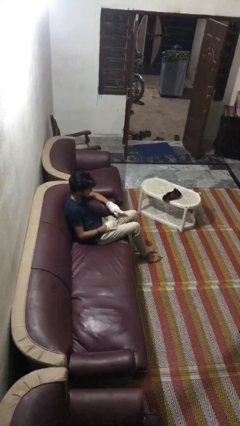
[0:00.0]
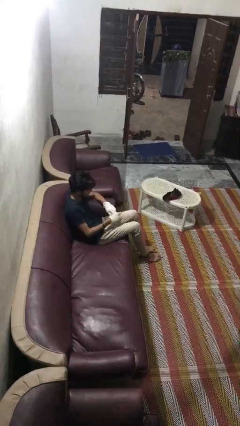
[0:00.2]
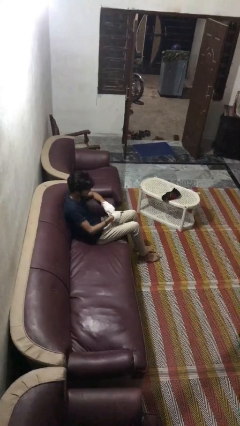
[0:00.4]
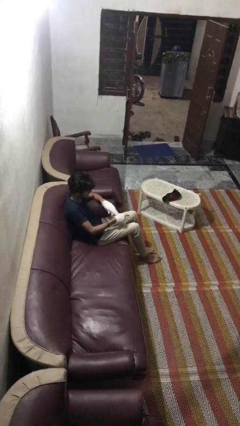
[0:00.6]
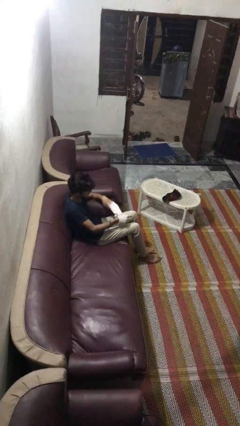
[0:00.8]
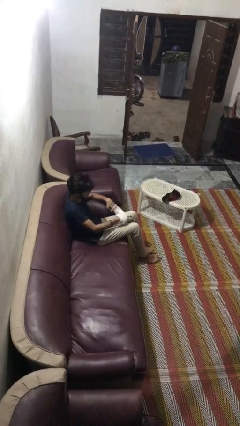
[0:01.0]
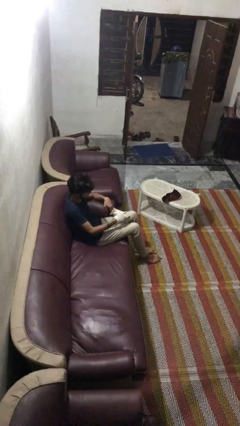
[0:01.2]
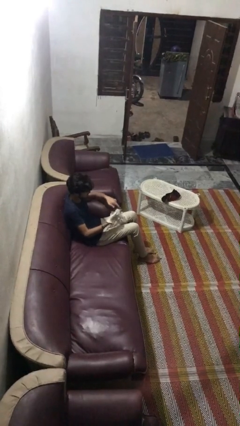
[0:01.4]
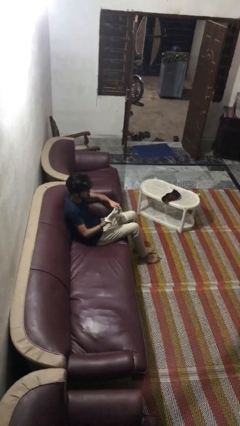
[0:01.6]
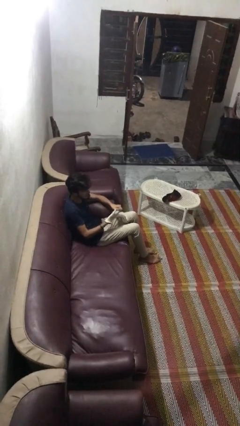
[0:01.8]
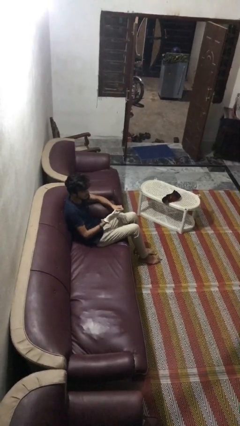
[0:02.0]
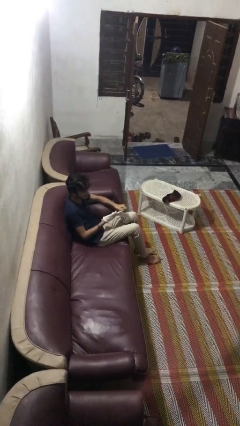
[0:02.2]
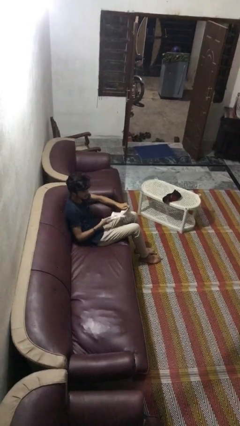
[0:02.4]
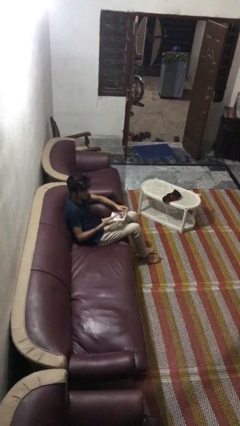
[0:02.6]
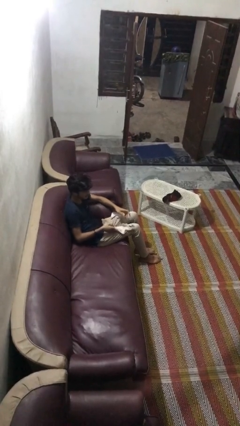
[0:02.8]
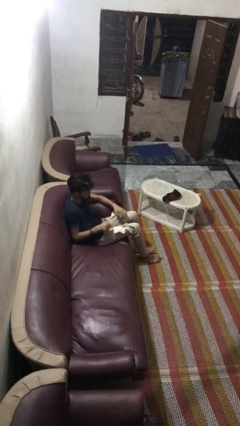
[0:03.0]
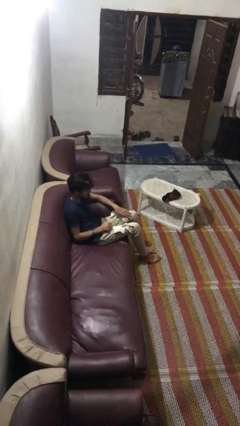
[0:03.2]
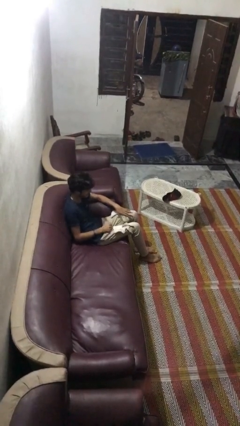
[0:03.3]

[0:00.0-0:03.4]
person takes off gloves

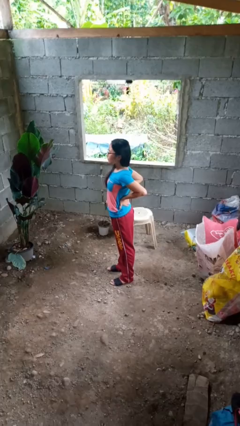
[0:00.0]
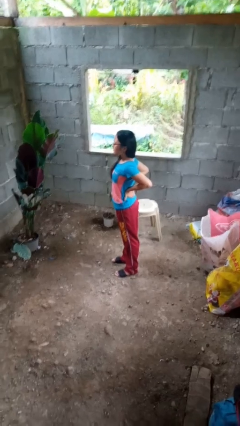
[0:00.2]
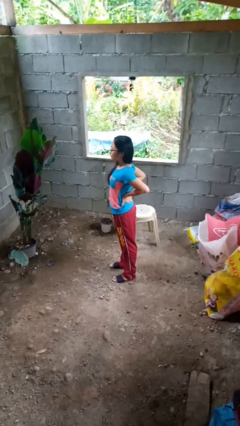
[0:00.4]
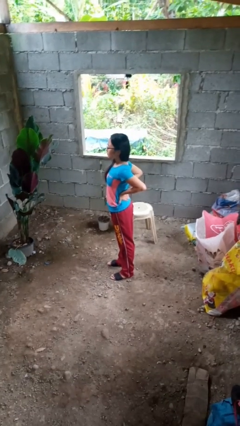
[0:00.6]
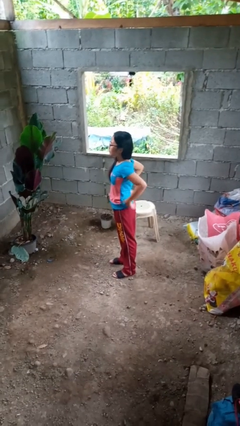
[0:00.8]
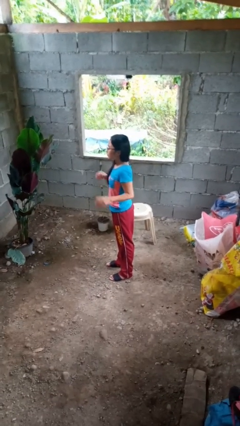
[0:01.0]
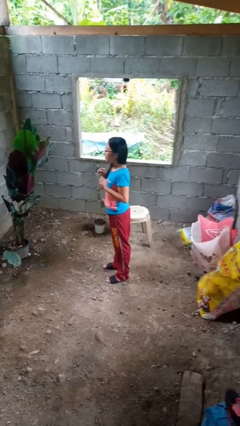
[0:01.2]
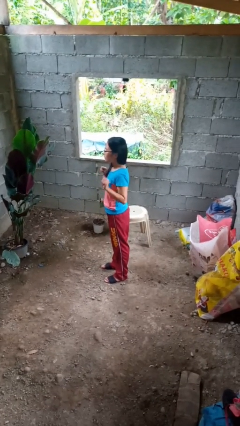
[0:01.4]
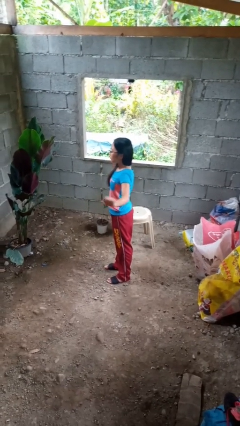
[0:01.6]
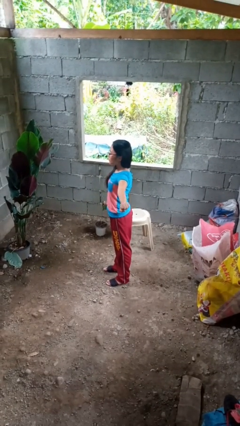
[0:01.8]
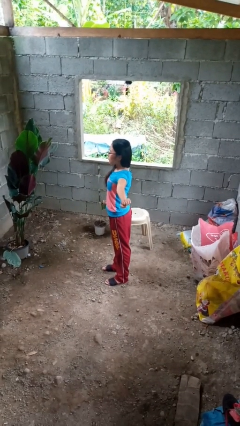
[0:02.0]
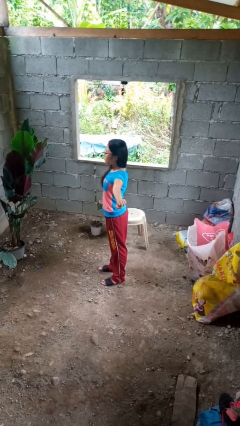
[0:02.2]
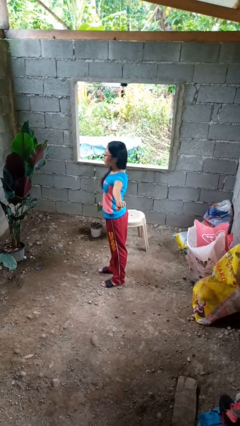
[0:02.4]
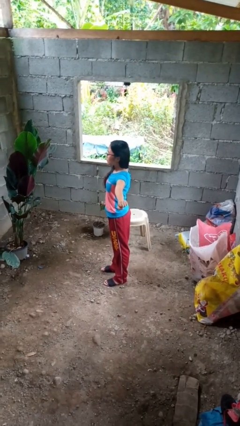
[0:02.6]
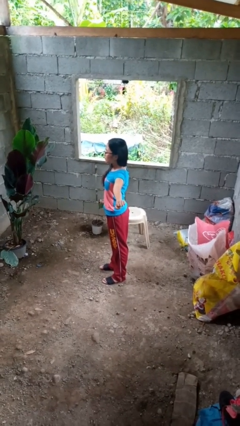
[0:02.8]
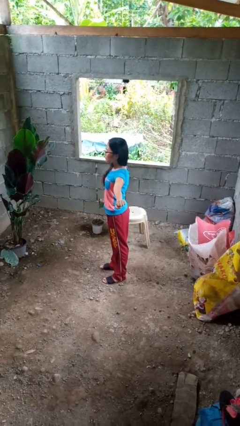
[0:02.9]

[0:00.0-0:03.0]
person stretches arms to side

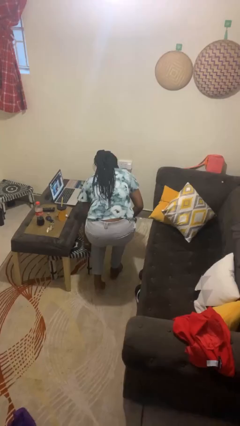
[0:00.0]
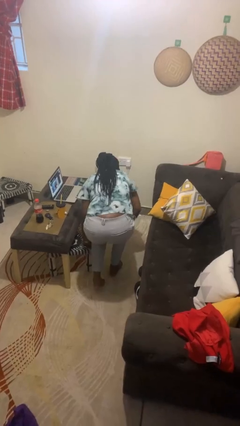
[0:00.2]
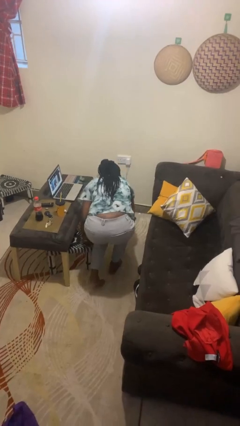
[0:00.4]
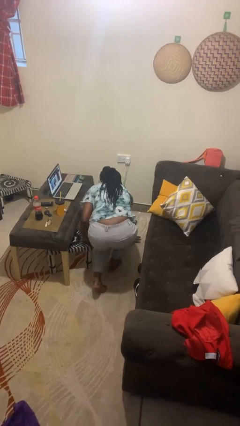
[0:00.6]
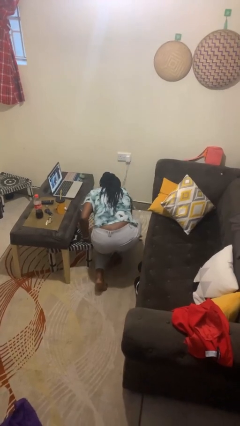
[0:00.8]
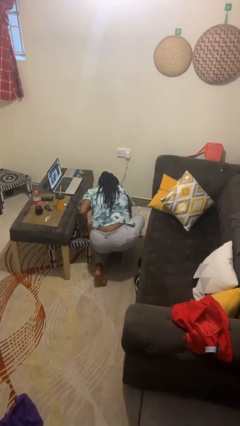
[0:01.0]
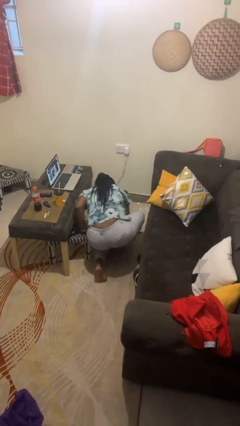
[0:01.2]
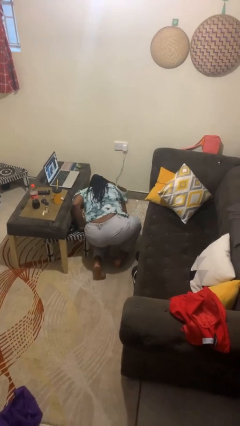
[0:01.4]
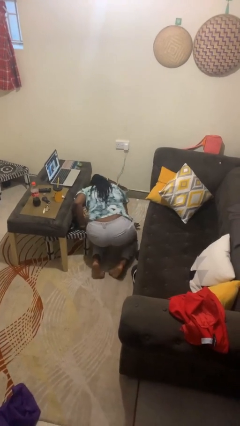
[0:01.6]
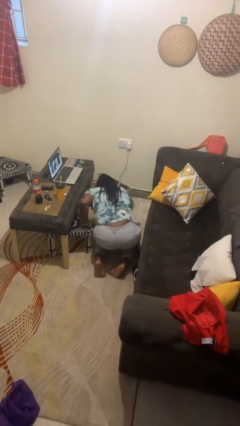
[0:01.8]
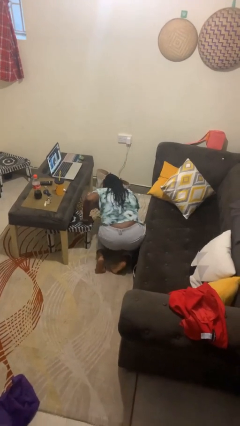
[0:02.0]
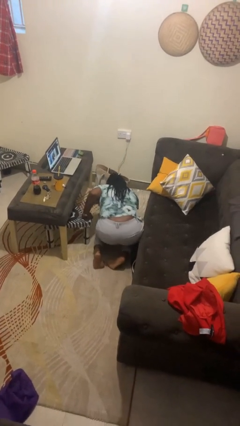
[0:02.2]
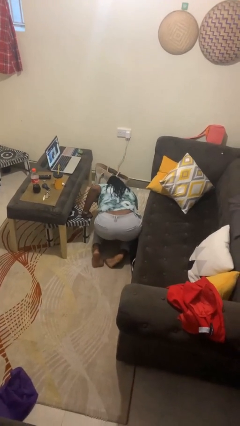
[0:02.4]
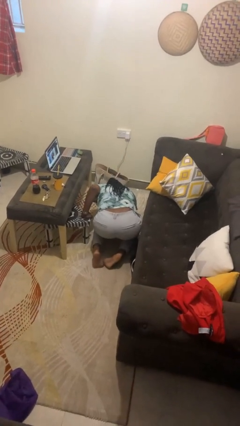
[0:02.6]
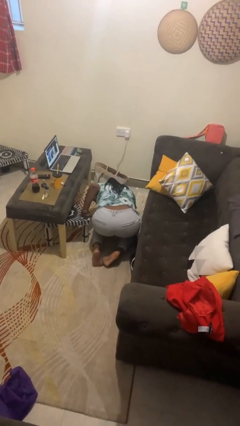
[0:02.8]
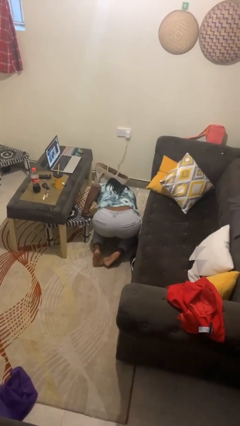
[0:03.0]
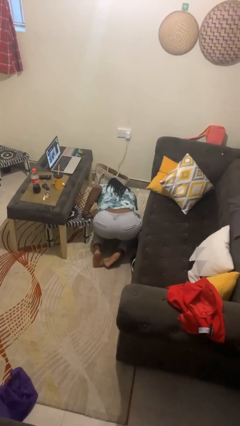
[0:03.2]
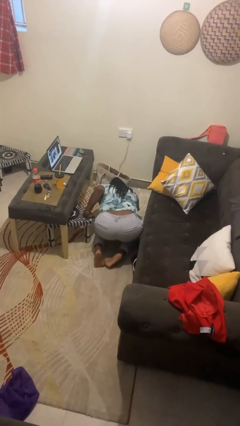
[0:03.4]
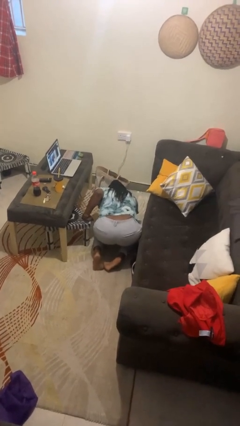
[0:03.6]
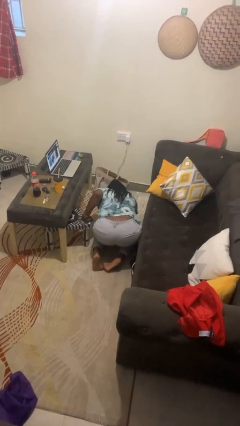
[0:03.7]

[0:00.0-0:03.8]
person lies down on floor

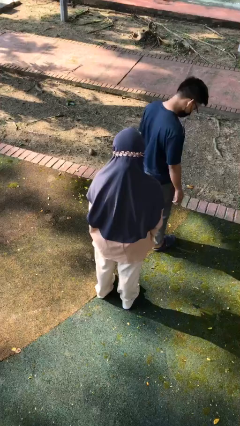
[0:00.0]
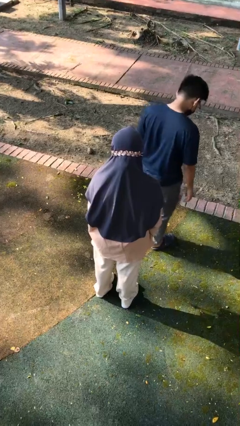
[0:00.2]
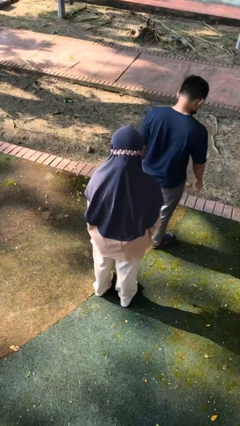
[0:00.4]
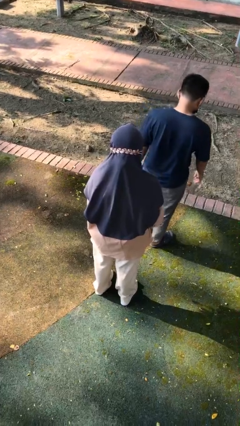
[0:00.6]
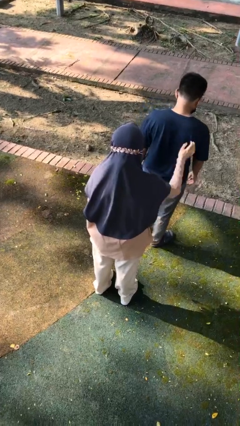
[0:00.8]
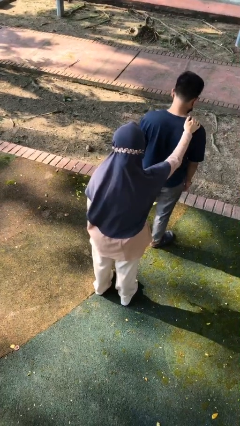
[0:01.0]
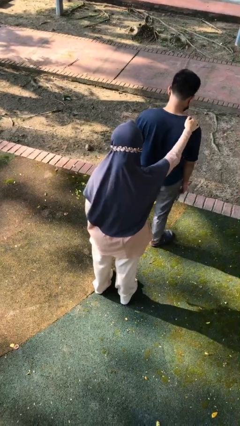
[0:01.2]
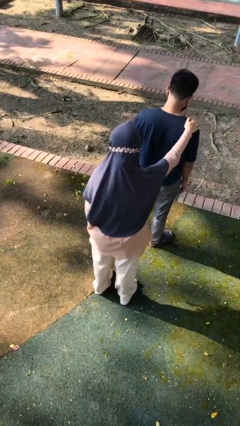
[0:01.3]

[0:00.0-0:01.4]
person grabs person by shoulder

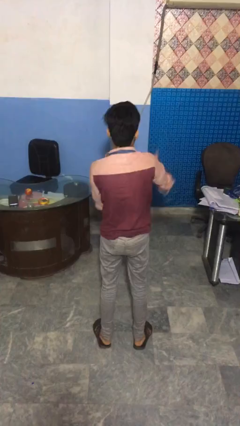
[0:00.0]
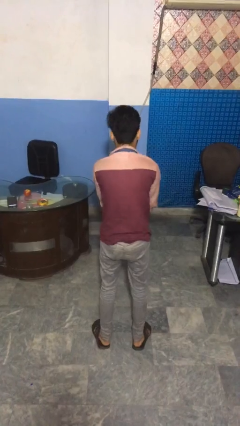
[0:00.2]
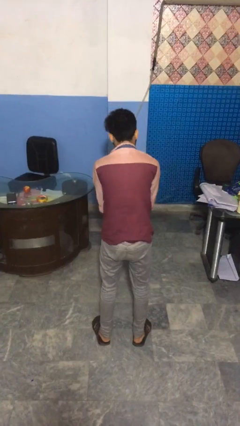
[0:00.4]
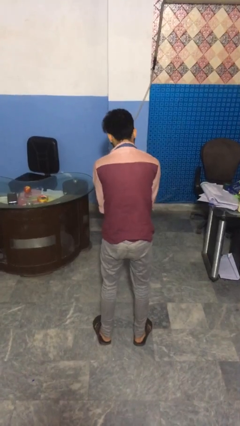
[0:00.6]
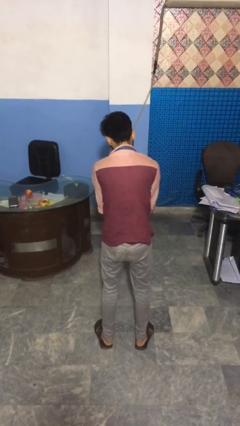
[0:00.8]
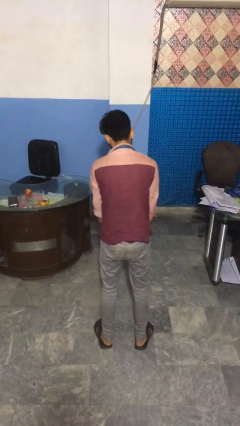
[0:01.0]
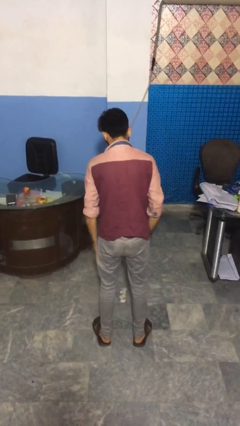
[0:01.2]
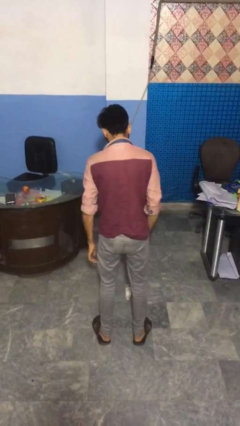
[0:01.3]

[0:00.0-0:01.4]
person catches dropped object

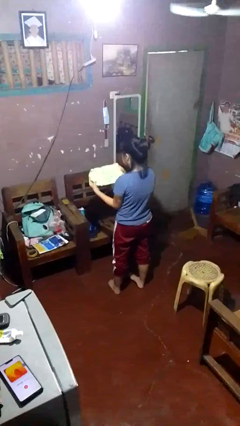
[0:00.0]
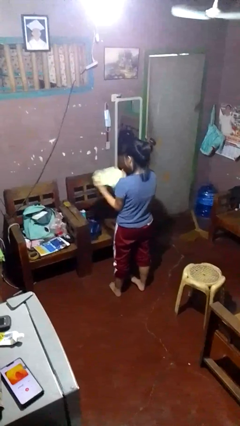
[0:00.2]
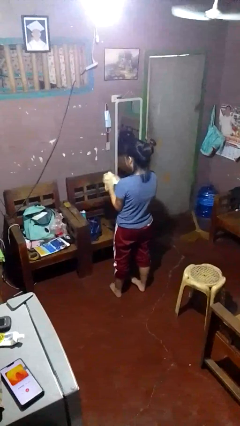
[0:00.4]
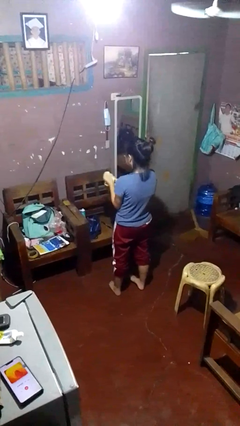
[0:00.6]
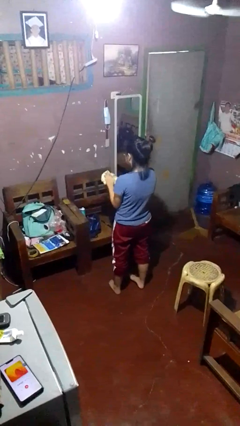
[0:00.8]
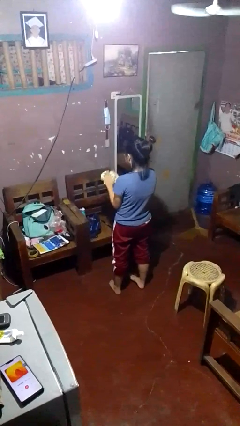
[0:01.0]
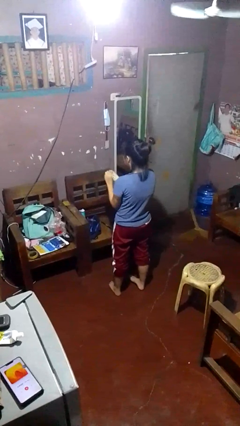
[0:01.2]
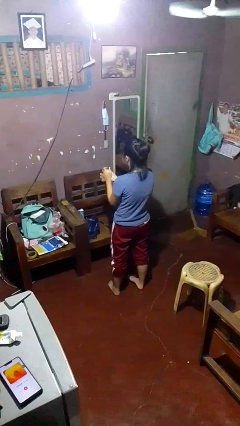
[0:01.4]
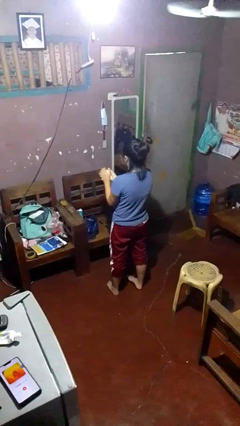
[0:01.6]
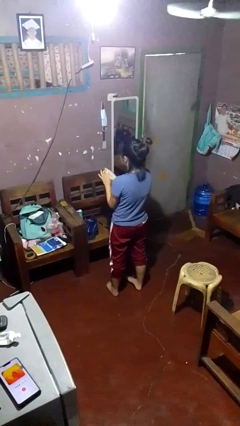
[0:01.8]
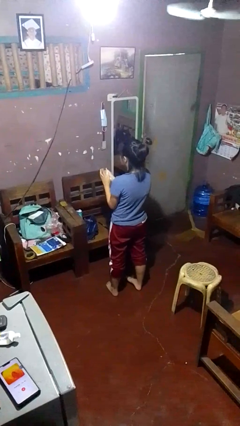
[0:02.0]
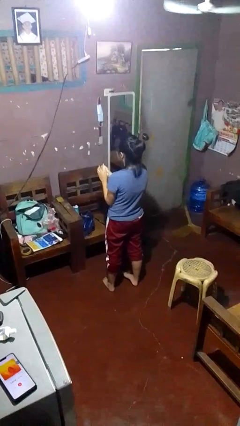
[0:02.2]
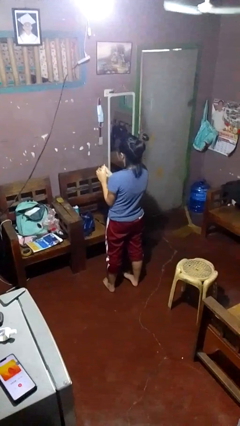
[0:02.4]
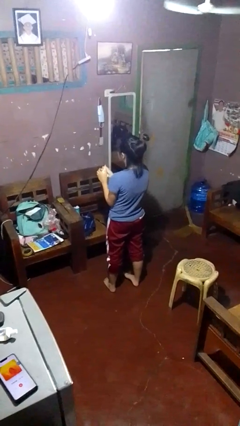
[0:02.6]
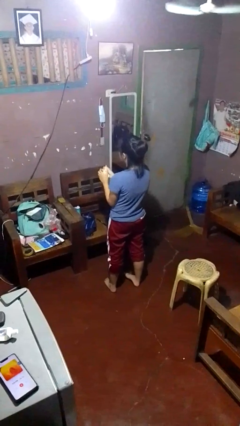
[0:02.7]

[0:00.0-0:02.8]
person crumples paper

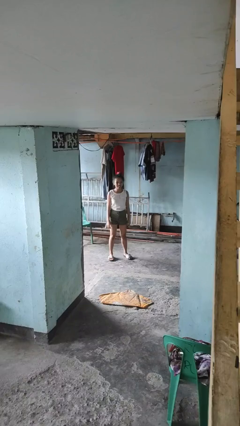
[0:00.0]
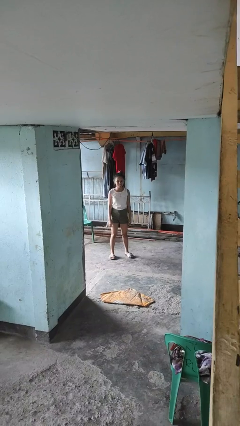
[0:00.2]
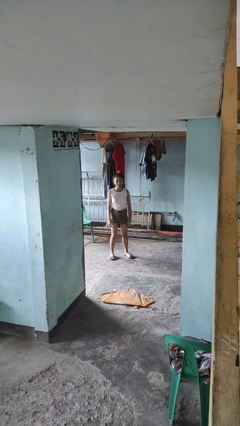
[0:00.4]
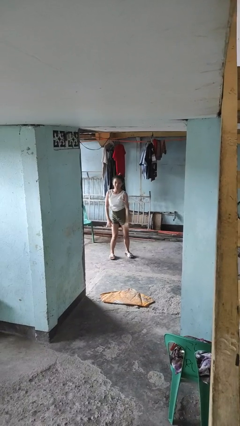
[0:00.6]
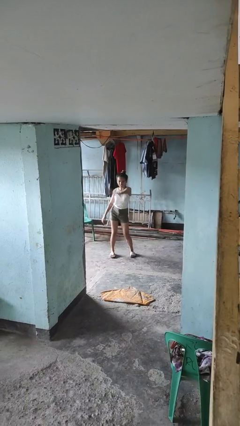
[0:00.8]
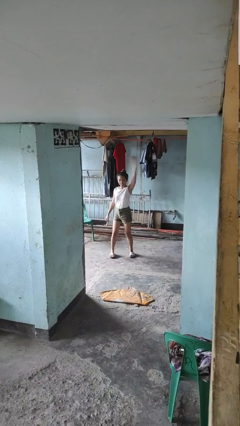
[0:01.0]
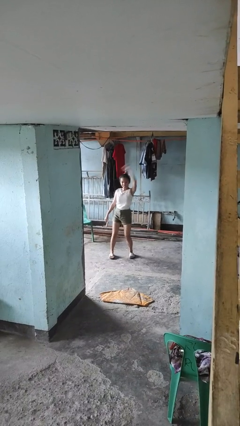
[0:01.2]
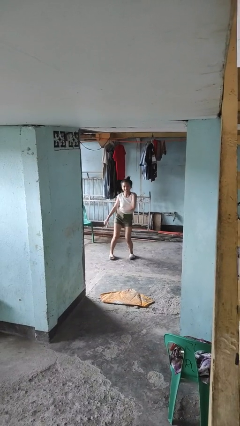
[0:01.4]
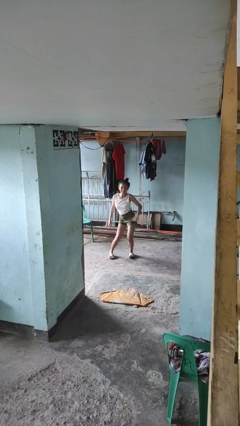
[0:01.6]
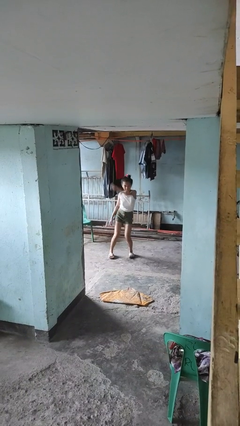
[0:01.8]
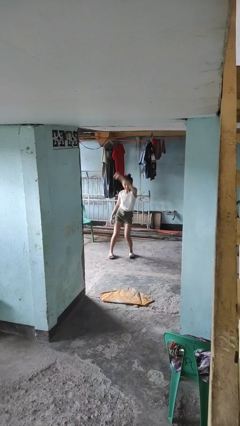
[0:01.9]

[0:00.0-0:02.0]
person dances in place
